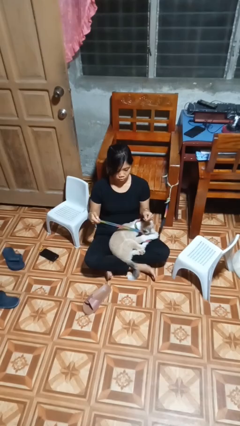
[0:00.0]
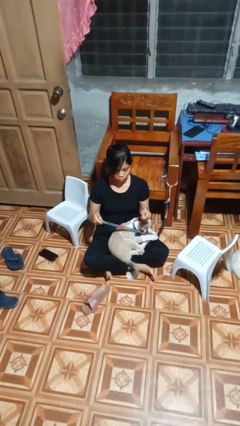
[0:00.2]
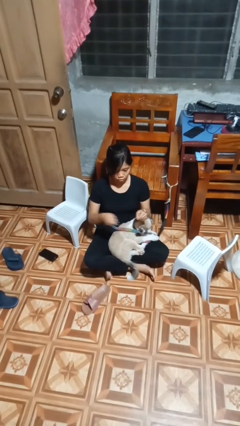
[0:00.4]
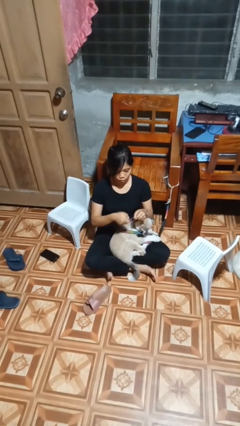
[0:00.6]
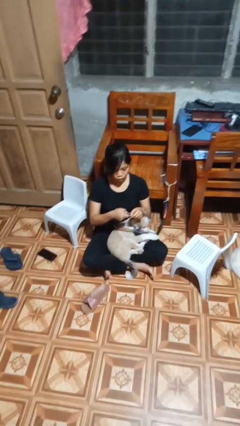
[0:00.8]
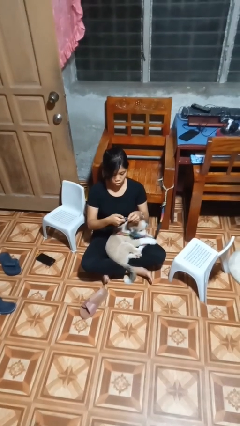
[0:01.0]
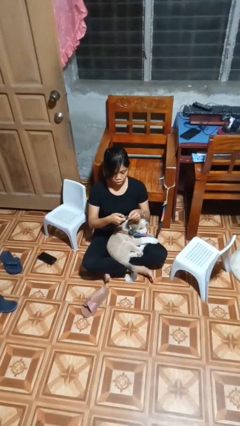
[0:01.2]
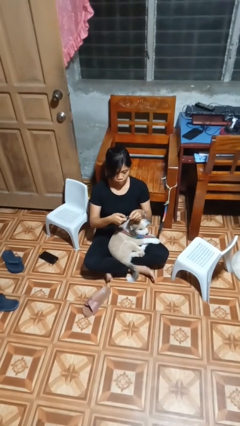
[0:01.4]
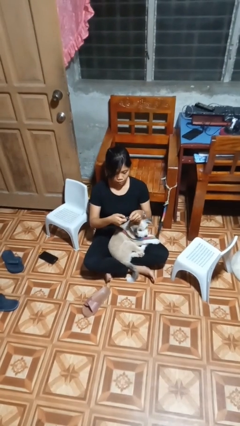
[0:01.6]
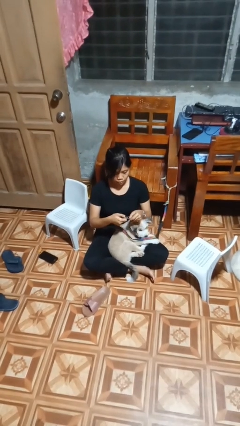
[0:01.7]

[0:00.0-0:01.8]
person attaches leash to dog

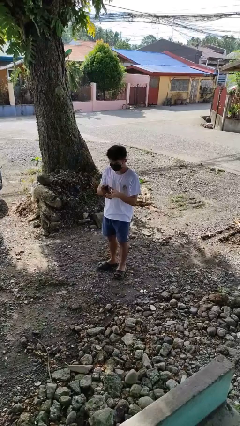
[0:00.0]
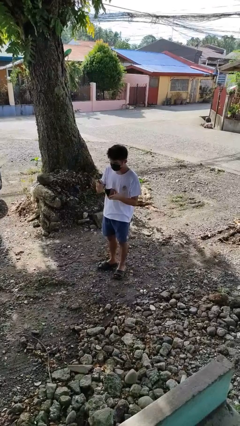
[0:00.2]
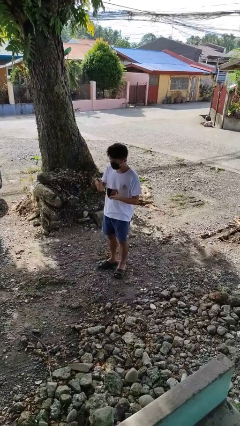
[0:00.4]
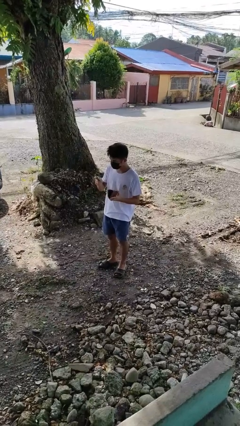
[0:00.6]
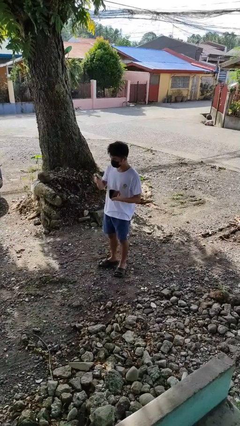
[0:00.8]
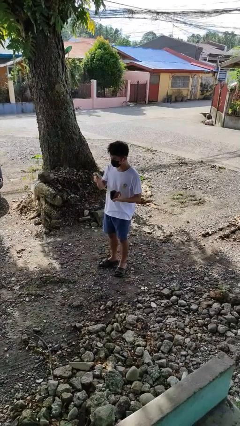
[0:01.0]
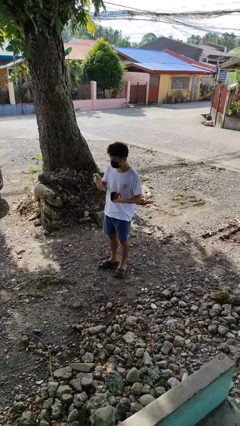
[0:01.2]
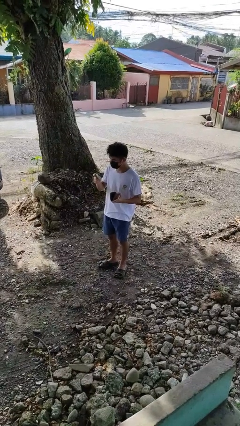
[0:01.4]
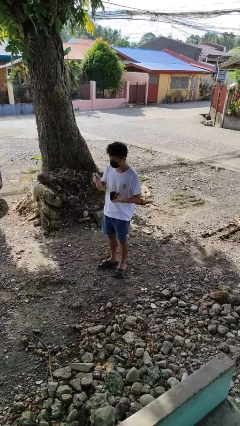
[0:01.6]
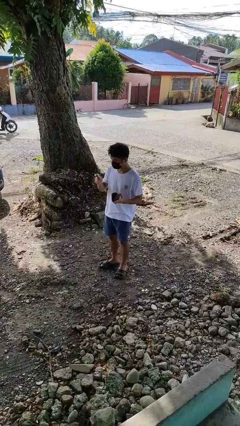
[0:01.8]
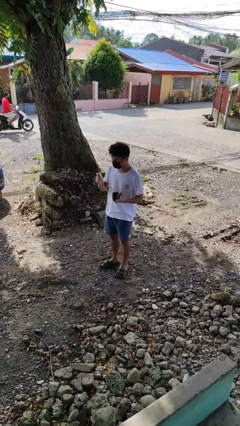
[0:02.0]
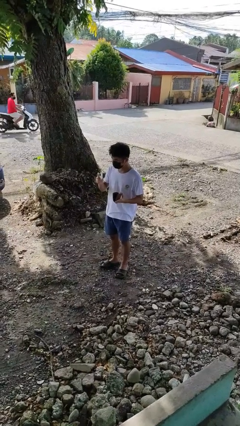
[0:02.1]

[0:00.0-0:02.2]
person takes object from purse

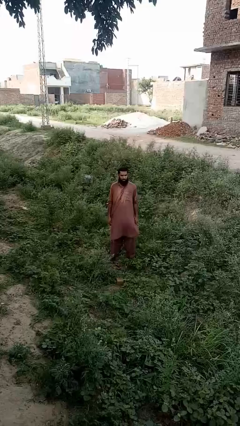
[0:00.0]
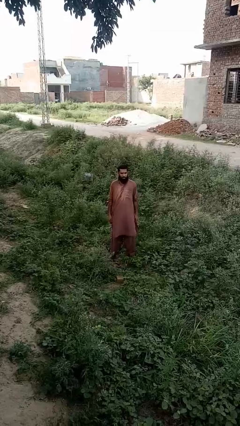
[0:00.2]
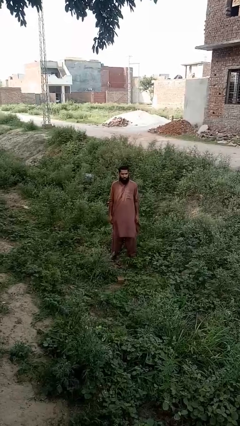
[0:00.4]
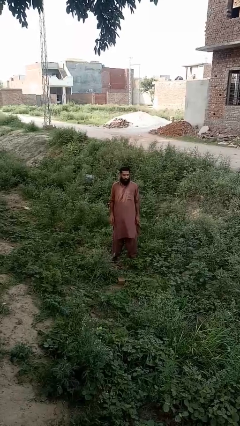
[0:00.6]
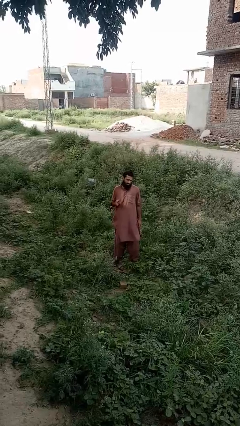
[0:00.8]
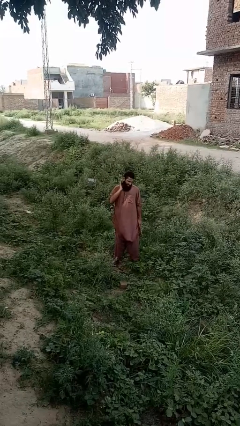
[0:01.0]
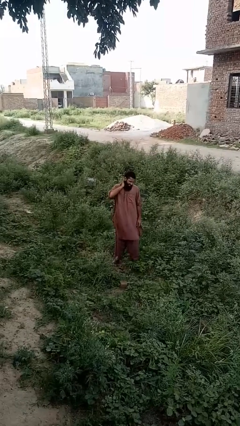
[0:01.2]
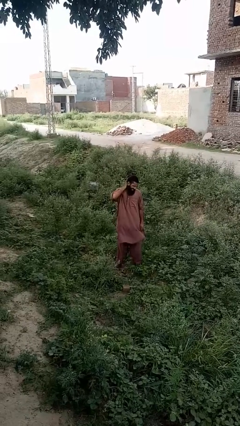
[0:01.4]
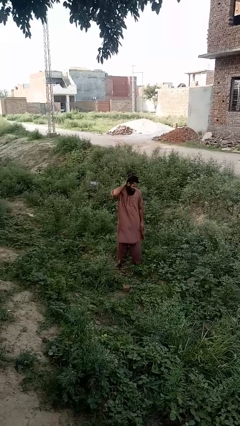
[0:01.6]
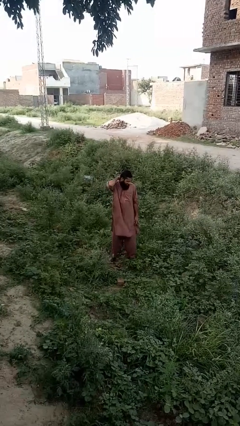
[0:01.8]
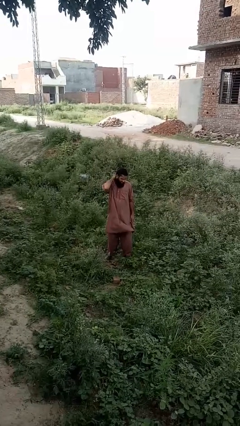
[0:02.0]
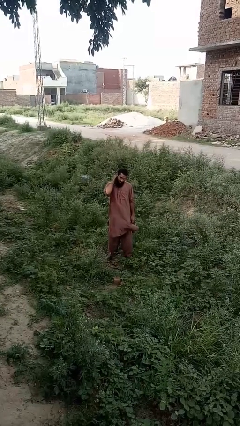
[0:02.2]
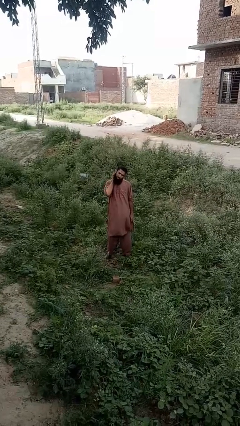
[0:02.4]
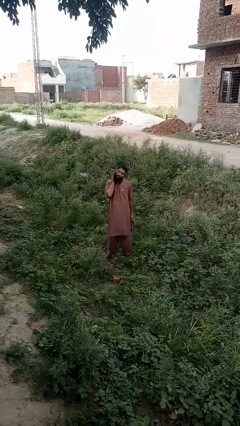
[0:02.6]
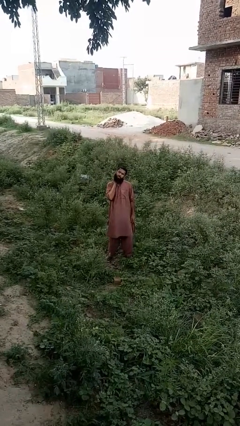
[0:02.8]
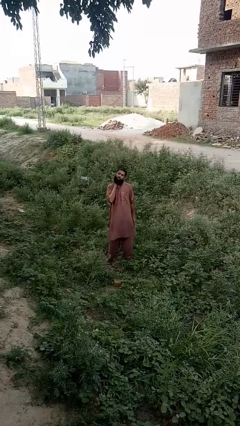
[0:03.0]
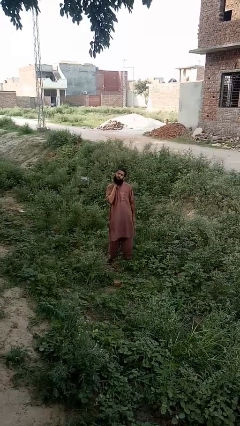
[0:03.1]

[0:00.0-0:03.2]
person rubs neck

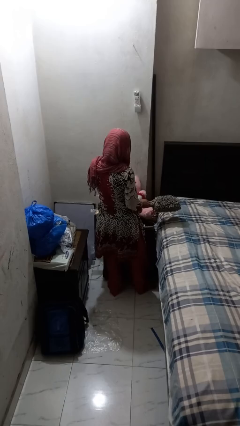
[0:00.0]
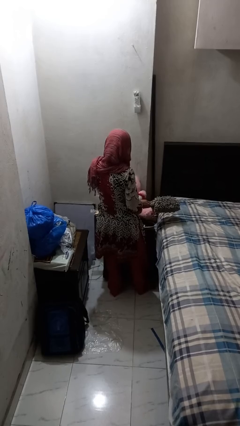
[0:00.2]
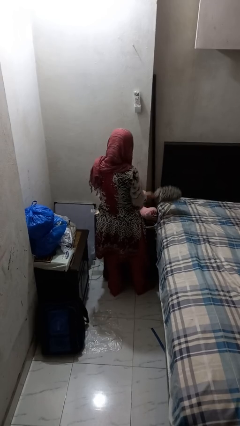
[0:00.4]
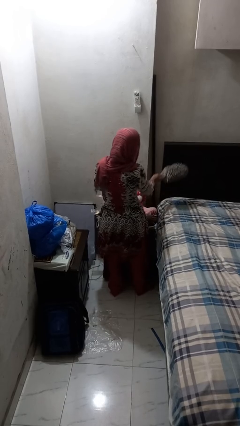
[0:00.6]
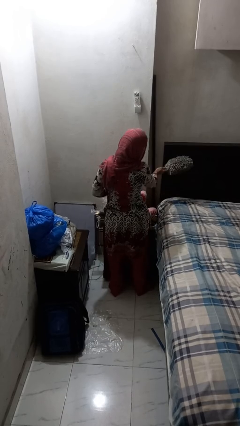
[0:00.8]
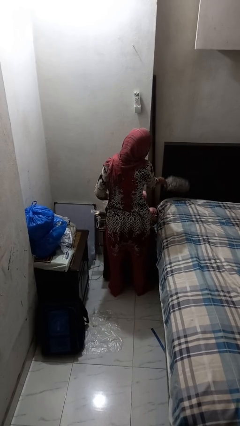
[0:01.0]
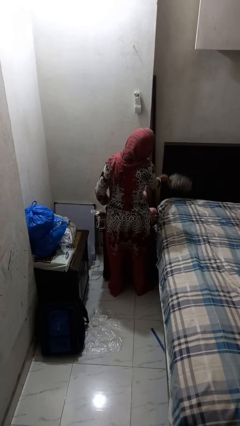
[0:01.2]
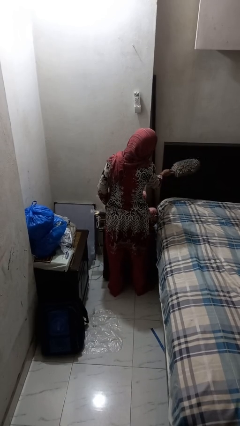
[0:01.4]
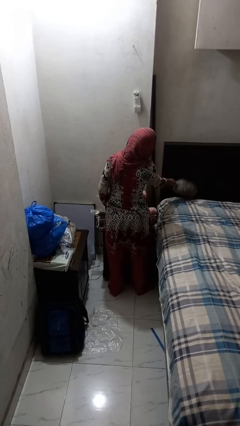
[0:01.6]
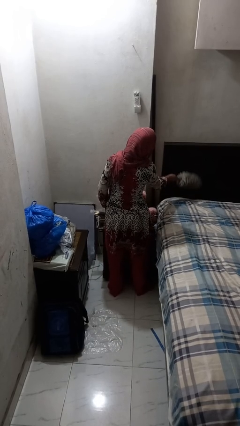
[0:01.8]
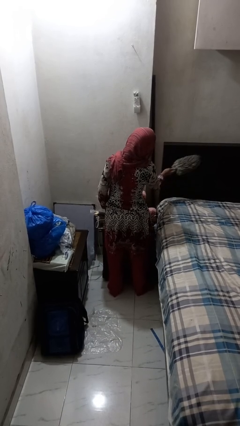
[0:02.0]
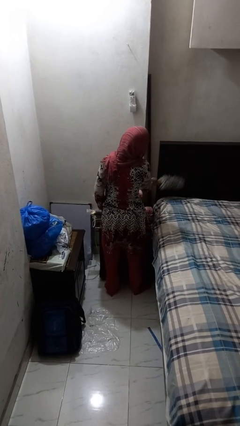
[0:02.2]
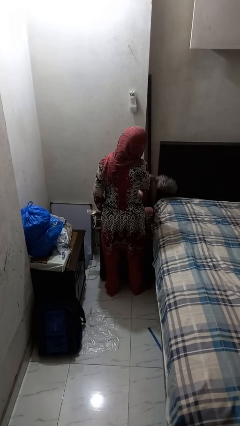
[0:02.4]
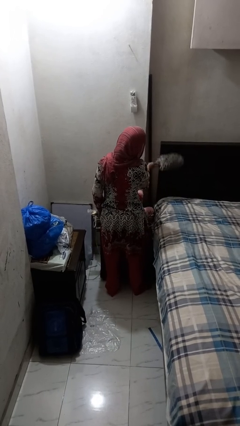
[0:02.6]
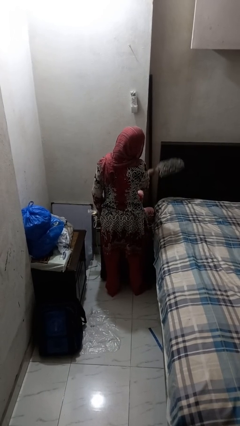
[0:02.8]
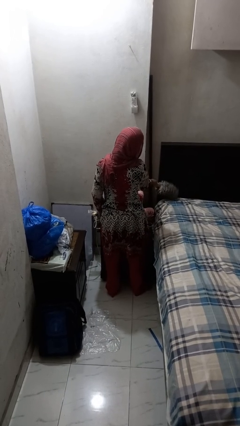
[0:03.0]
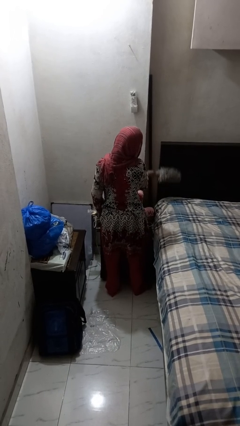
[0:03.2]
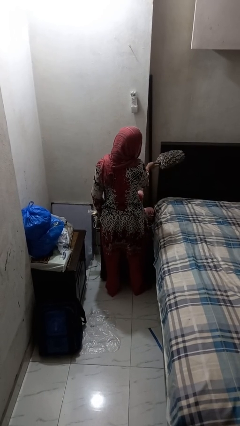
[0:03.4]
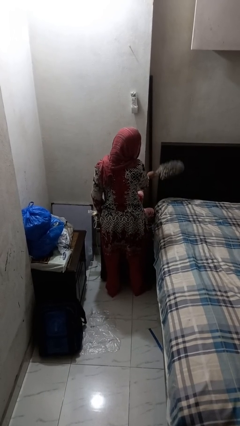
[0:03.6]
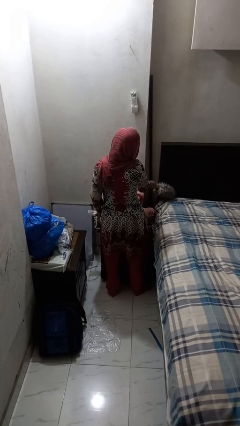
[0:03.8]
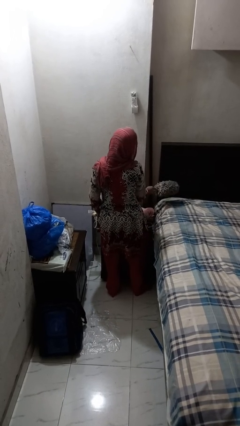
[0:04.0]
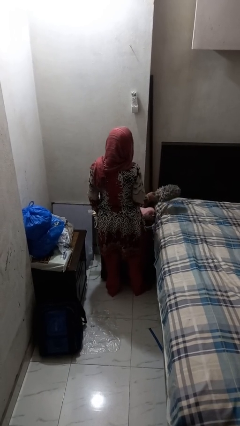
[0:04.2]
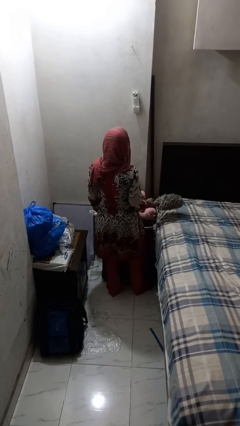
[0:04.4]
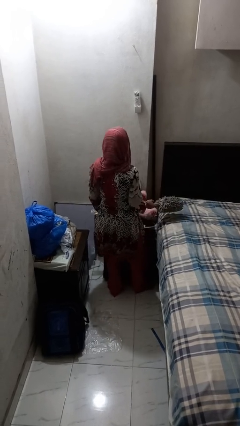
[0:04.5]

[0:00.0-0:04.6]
person dusts furniture

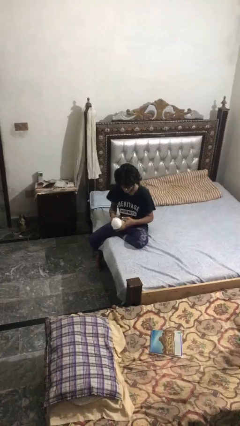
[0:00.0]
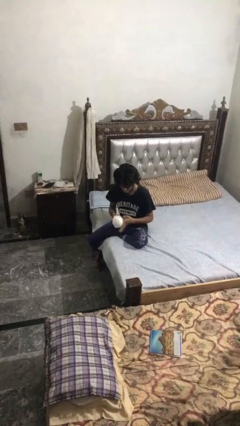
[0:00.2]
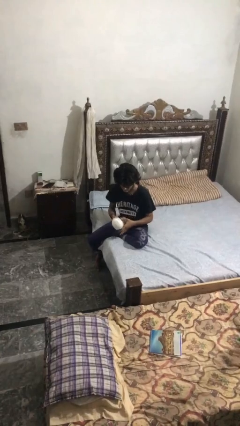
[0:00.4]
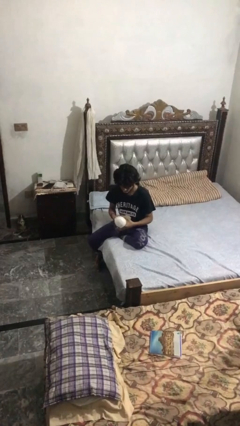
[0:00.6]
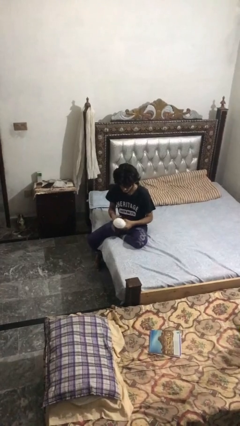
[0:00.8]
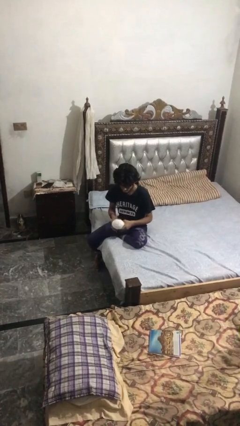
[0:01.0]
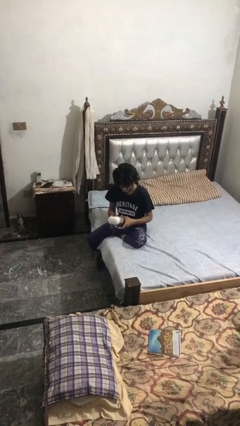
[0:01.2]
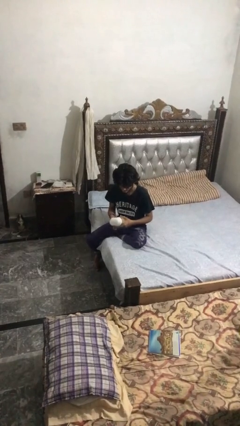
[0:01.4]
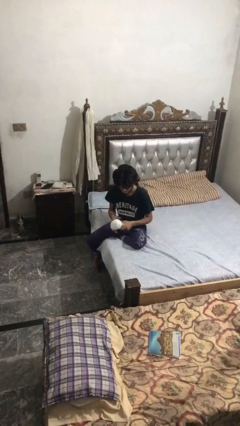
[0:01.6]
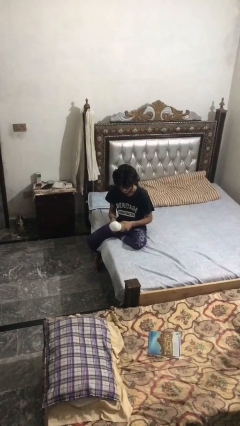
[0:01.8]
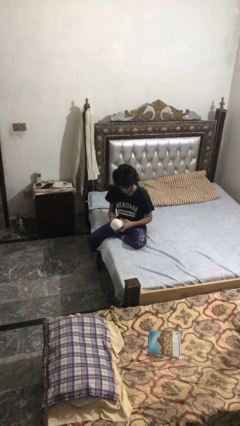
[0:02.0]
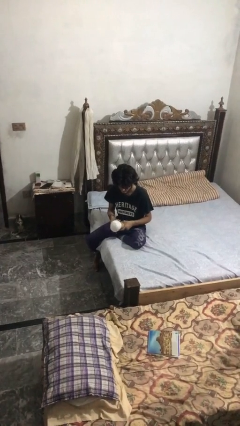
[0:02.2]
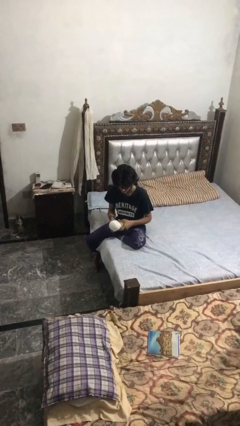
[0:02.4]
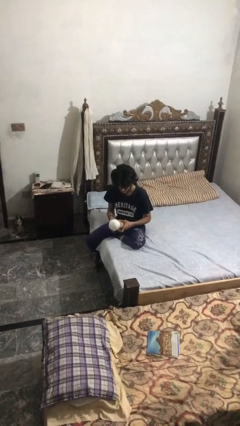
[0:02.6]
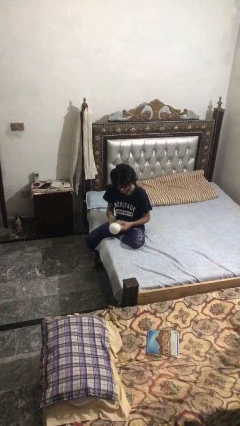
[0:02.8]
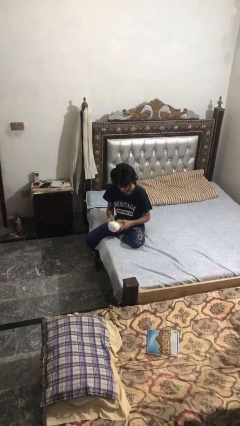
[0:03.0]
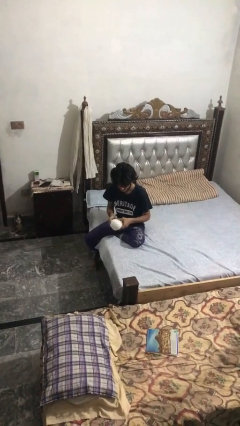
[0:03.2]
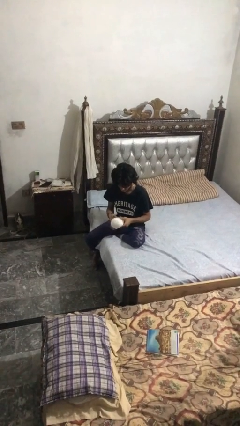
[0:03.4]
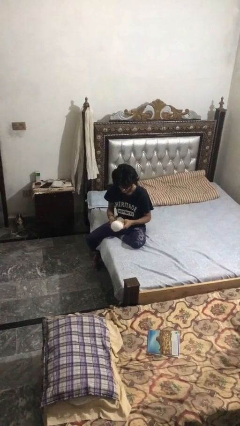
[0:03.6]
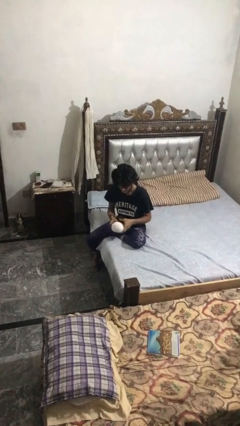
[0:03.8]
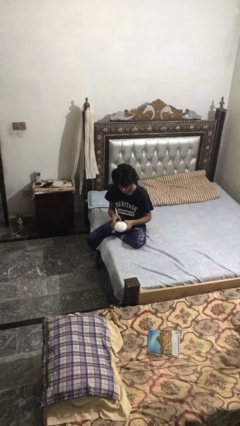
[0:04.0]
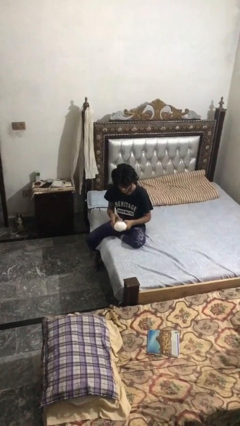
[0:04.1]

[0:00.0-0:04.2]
person squeezes object

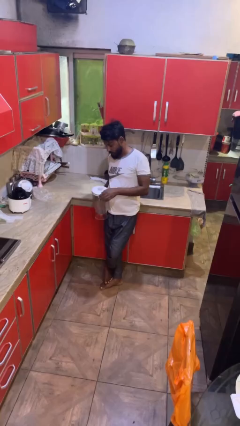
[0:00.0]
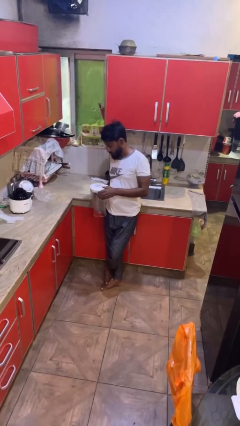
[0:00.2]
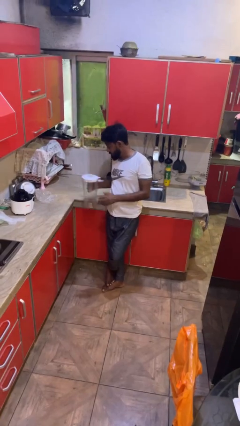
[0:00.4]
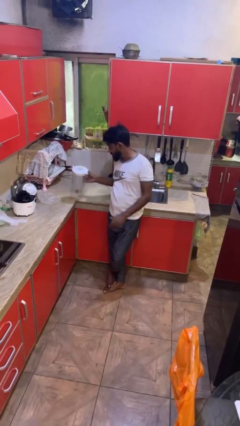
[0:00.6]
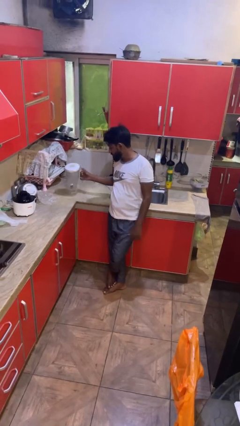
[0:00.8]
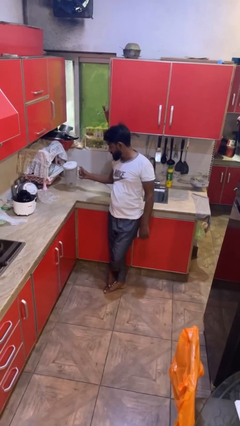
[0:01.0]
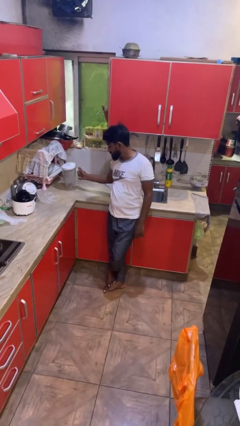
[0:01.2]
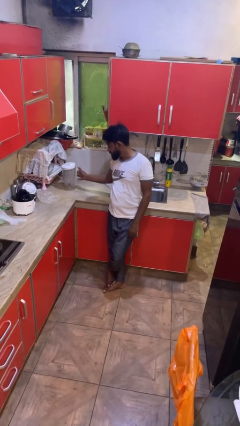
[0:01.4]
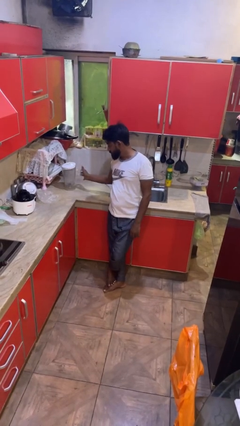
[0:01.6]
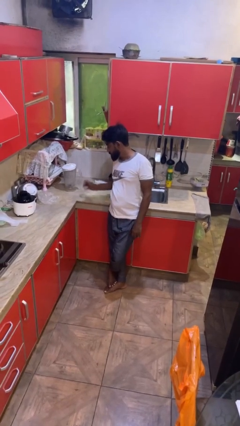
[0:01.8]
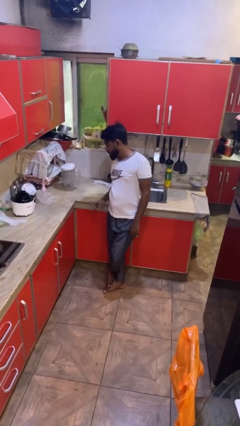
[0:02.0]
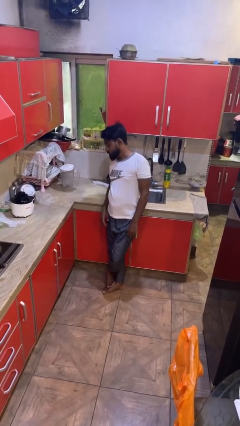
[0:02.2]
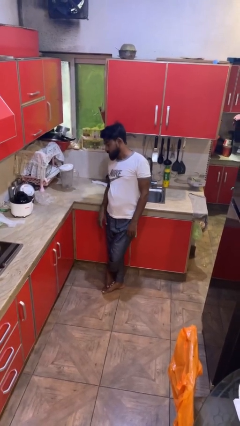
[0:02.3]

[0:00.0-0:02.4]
person puts down object on countertop
